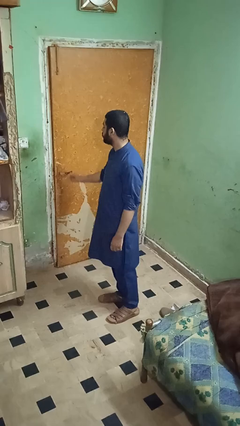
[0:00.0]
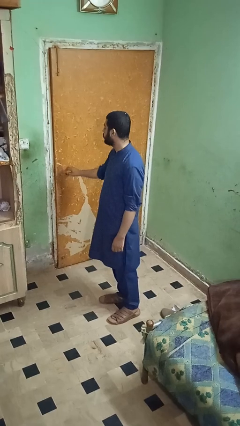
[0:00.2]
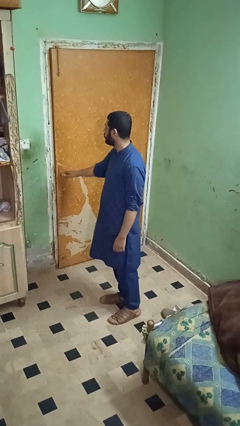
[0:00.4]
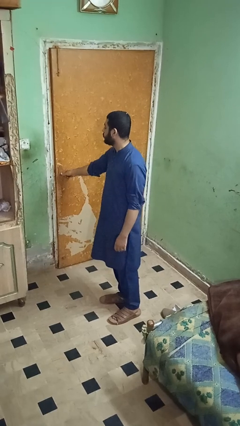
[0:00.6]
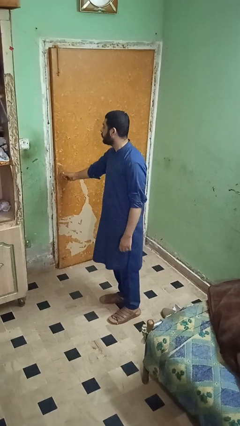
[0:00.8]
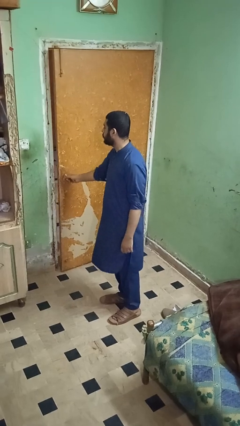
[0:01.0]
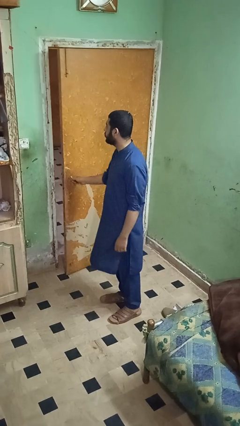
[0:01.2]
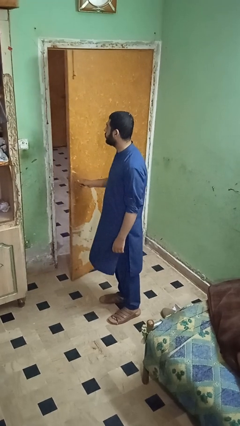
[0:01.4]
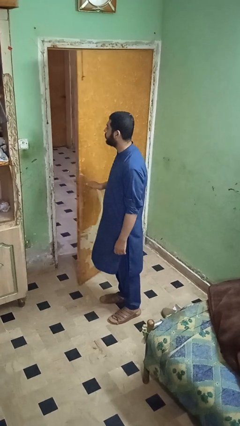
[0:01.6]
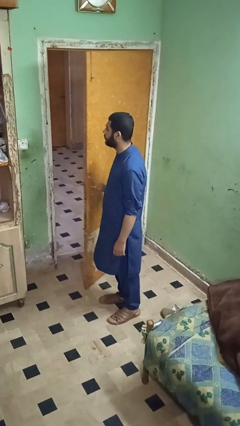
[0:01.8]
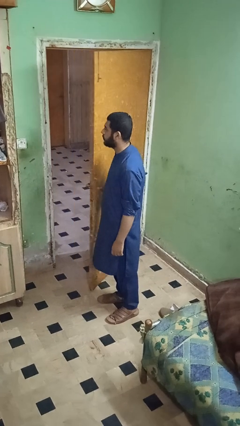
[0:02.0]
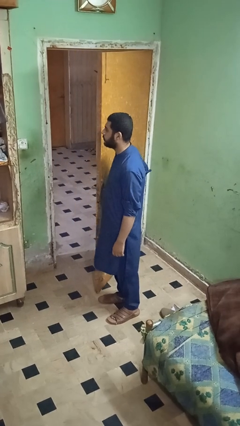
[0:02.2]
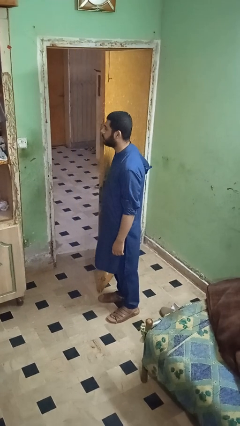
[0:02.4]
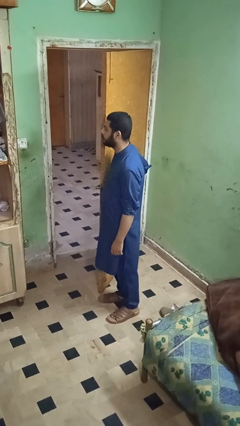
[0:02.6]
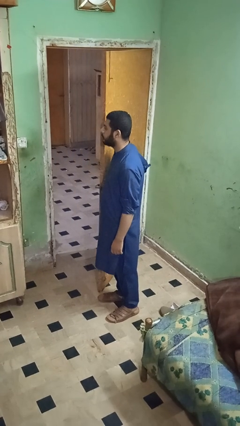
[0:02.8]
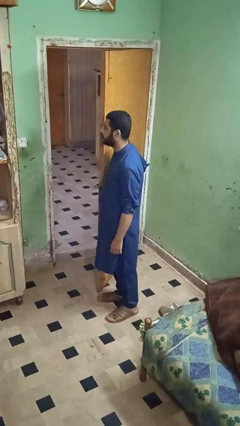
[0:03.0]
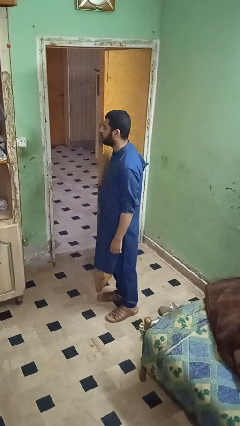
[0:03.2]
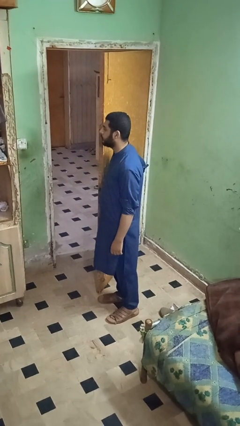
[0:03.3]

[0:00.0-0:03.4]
person opens facility door

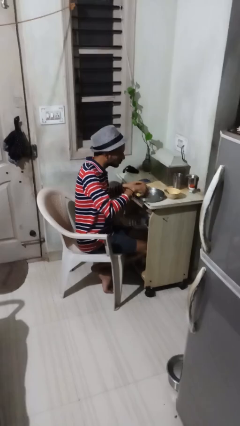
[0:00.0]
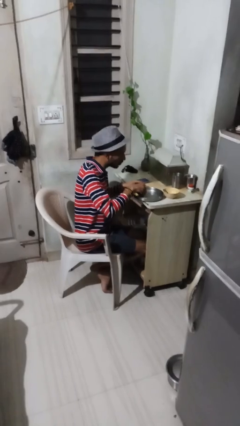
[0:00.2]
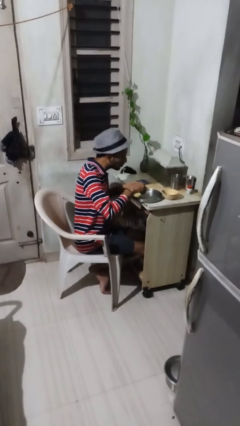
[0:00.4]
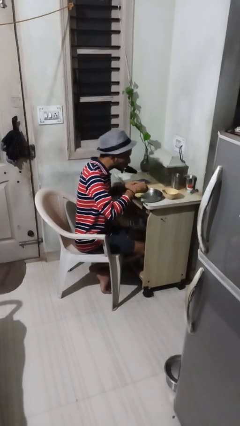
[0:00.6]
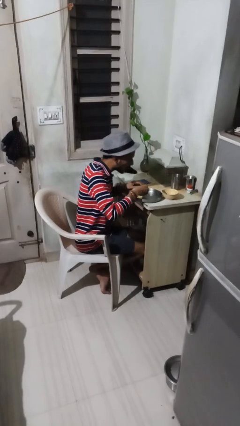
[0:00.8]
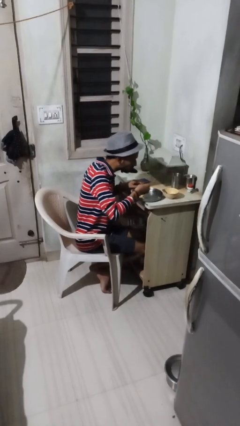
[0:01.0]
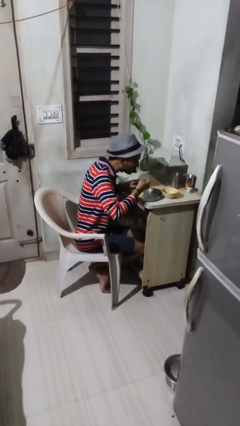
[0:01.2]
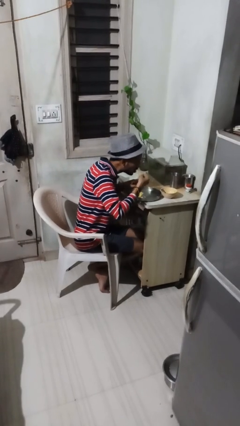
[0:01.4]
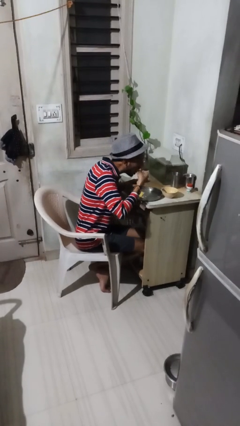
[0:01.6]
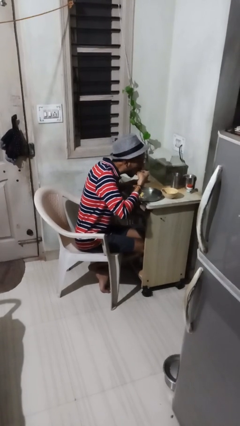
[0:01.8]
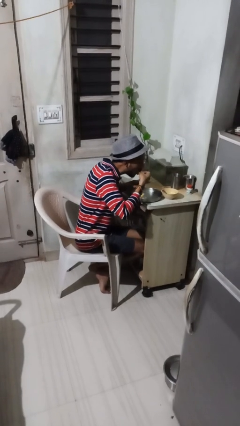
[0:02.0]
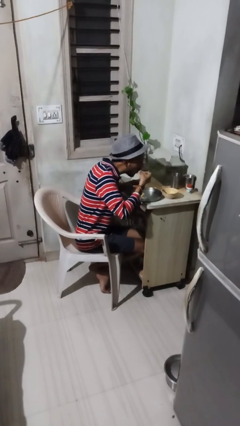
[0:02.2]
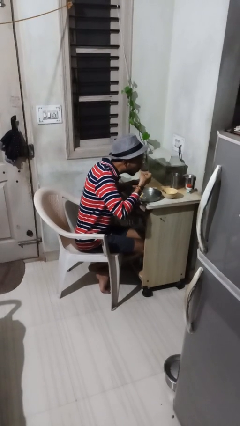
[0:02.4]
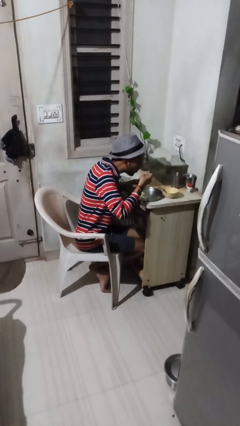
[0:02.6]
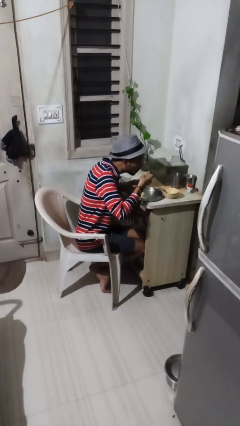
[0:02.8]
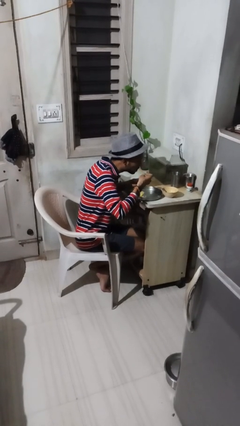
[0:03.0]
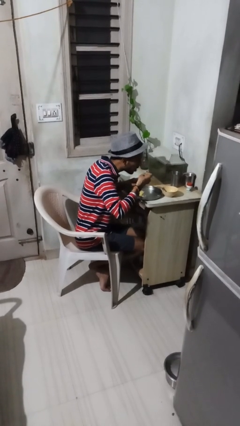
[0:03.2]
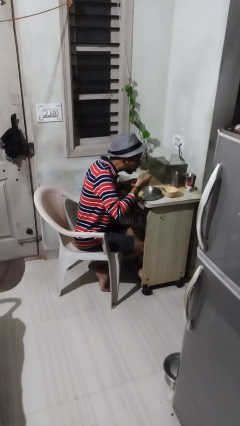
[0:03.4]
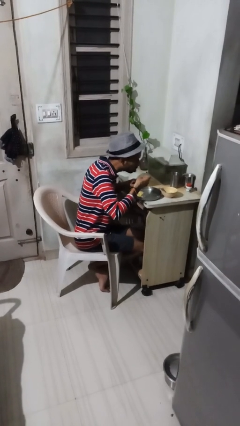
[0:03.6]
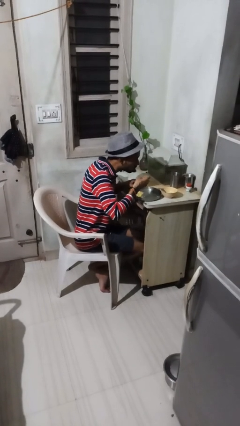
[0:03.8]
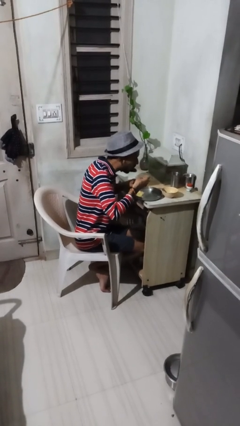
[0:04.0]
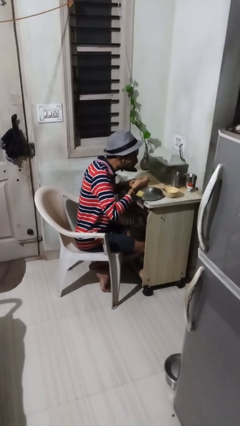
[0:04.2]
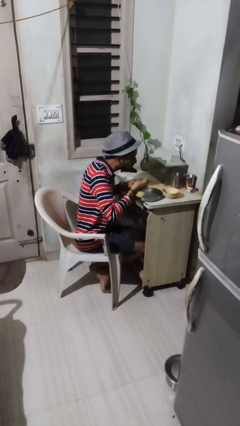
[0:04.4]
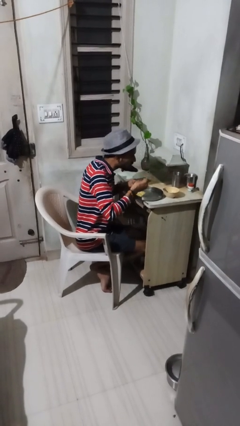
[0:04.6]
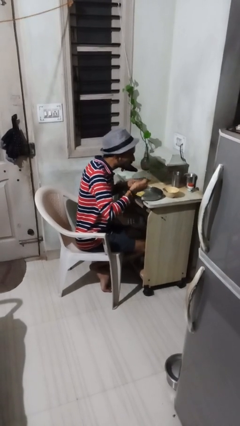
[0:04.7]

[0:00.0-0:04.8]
person eats with utensil

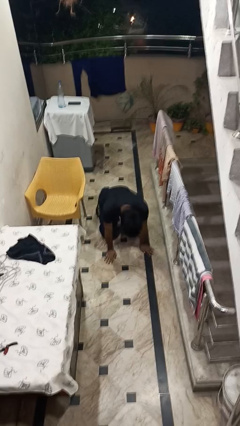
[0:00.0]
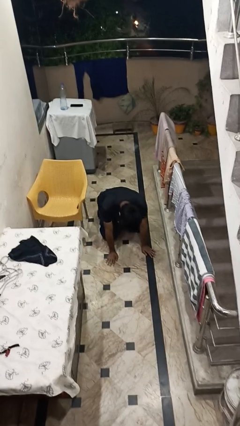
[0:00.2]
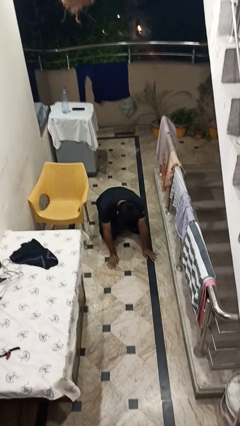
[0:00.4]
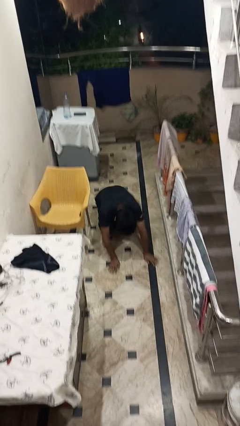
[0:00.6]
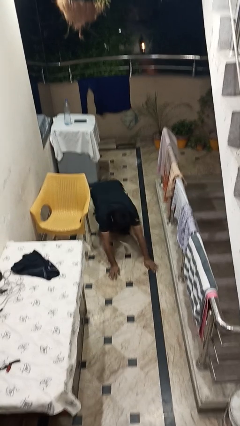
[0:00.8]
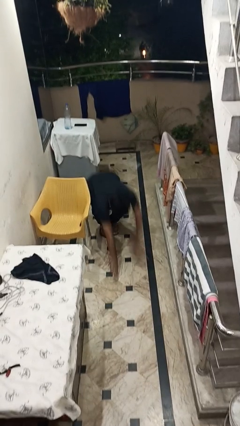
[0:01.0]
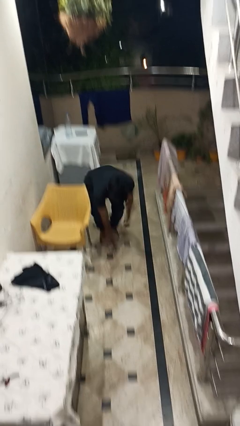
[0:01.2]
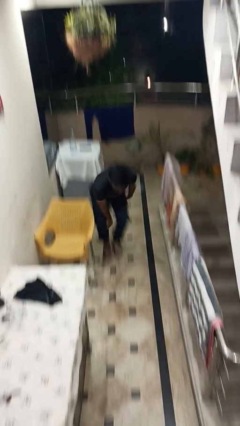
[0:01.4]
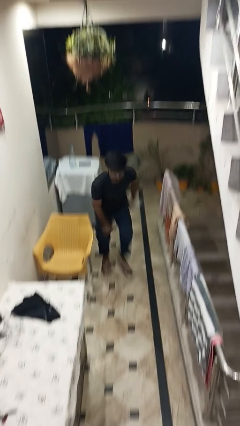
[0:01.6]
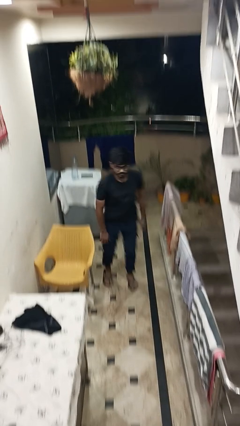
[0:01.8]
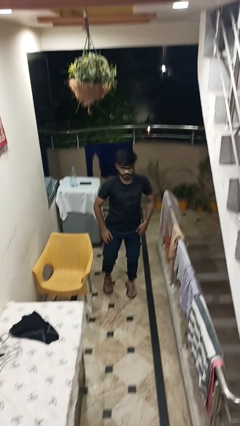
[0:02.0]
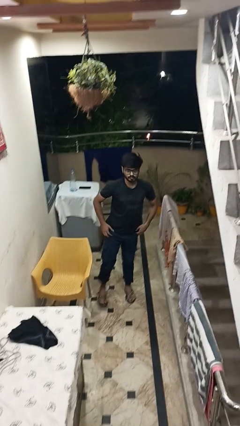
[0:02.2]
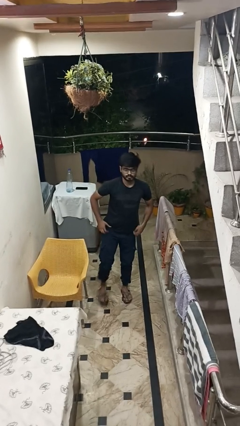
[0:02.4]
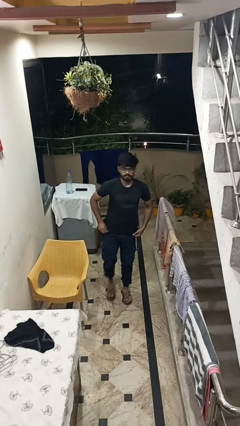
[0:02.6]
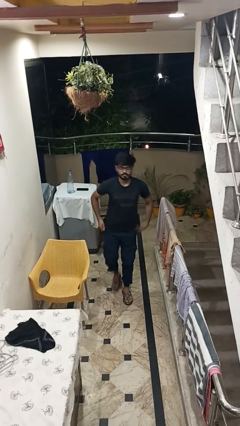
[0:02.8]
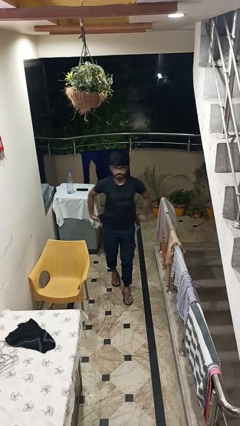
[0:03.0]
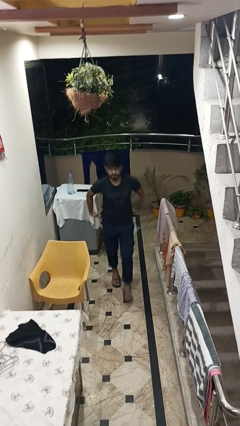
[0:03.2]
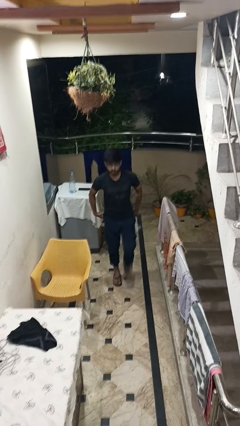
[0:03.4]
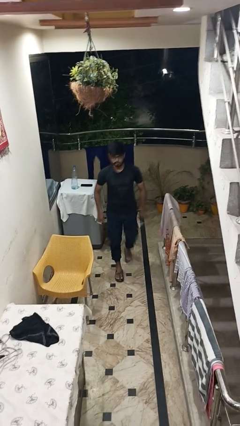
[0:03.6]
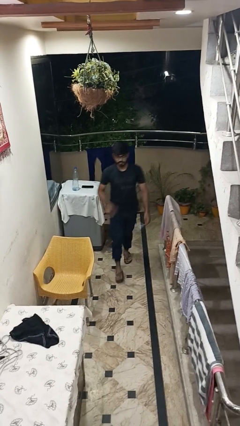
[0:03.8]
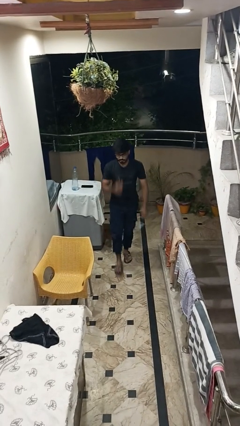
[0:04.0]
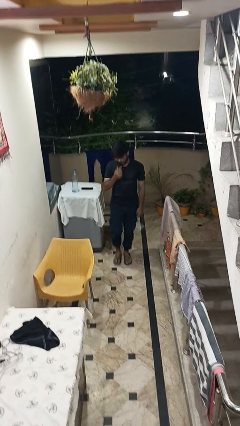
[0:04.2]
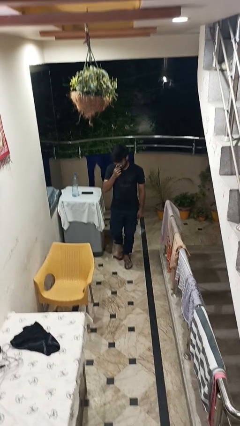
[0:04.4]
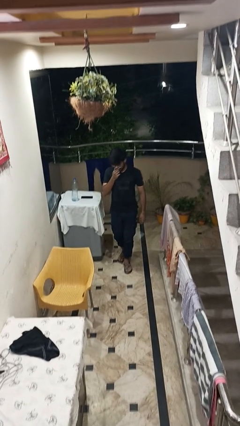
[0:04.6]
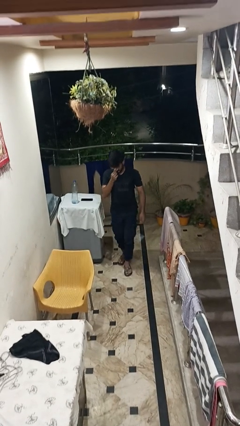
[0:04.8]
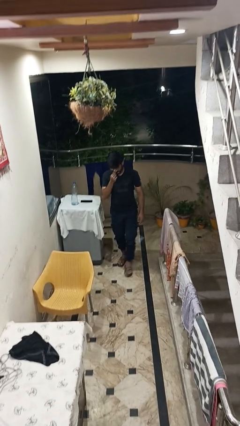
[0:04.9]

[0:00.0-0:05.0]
person stands up from floor

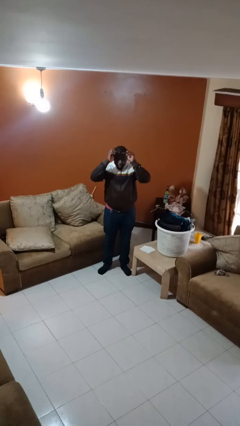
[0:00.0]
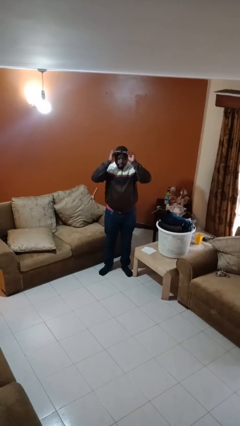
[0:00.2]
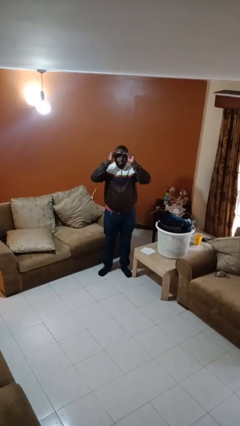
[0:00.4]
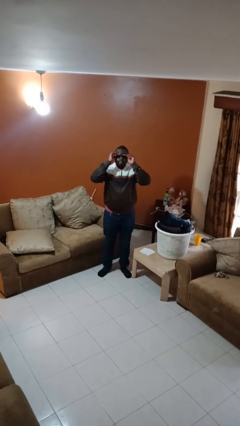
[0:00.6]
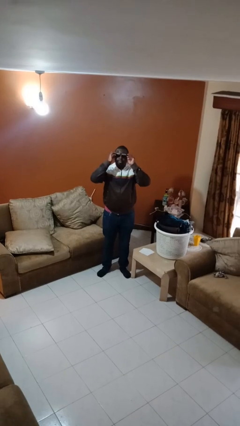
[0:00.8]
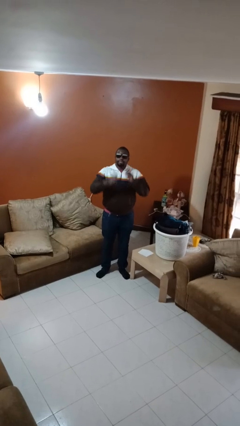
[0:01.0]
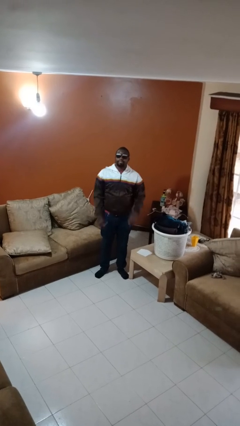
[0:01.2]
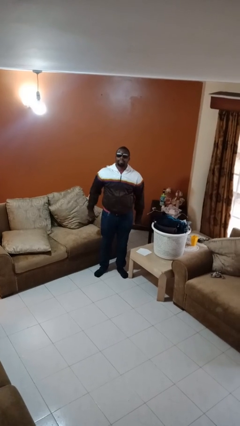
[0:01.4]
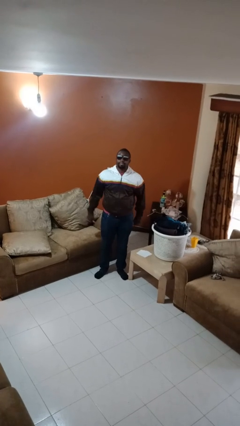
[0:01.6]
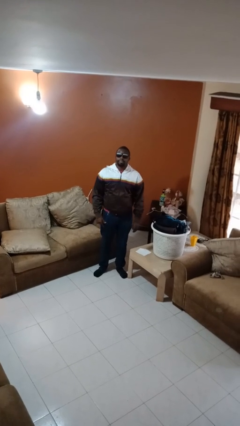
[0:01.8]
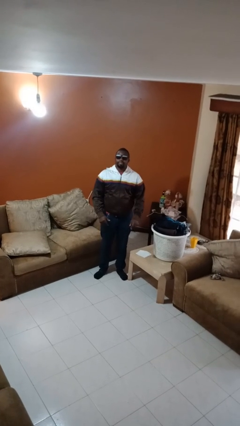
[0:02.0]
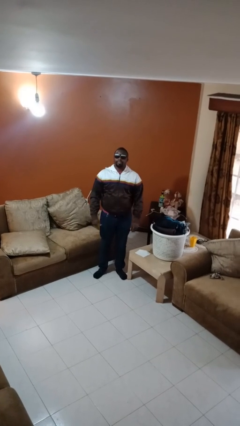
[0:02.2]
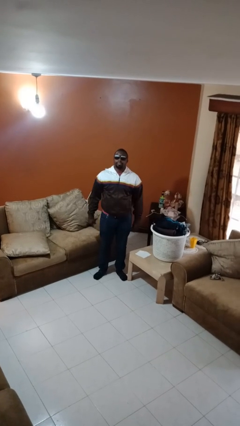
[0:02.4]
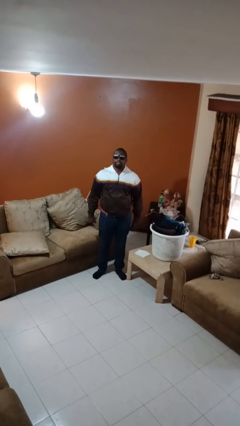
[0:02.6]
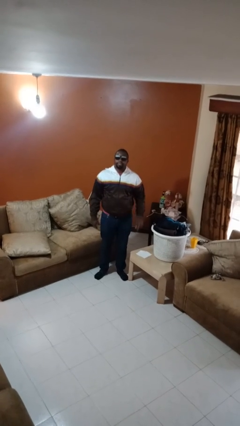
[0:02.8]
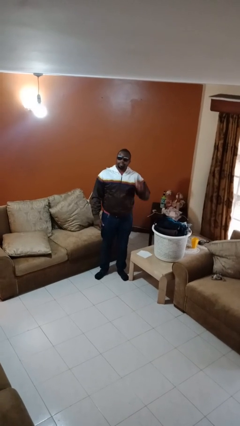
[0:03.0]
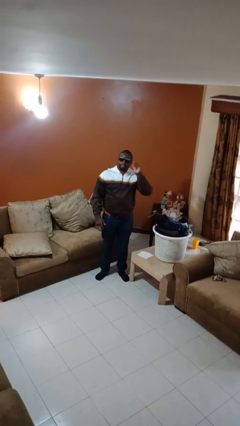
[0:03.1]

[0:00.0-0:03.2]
person puts on sunglasses

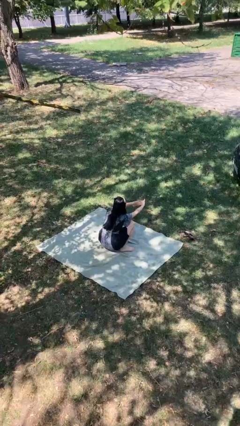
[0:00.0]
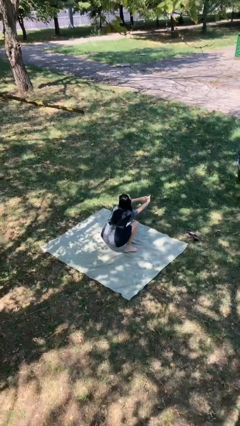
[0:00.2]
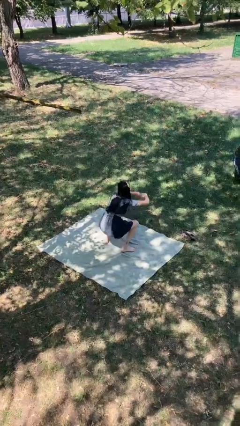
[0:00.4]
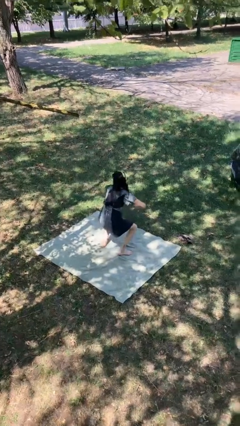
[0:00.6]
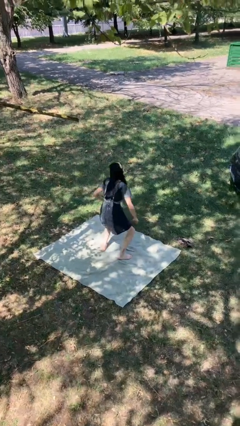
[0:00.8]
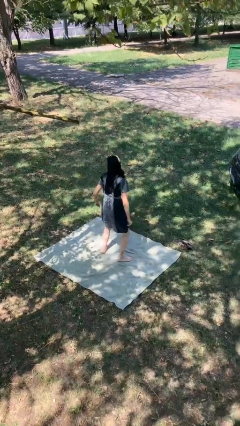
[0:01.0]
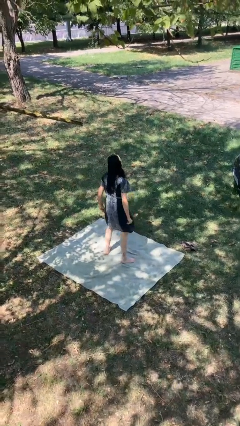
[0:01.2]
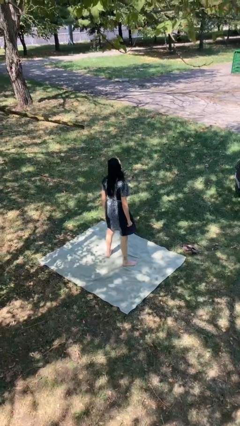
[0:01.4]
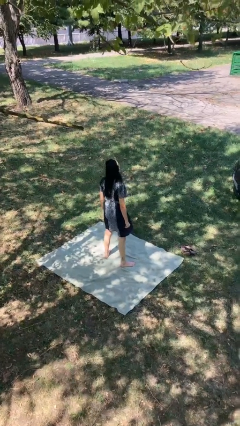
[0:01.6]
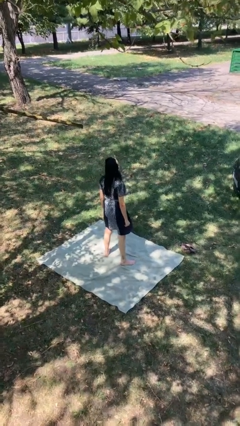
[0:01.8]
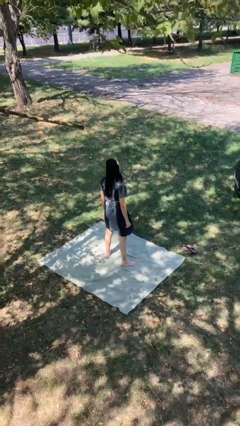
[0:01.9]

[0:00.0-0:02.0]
person stands up
